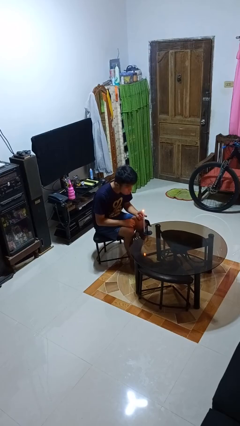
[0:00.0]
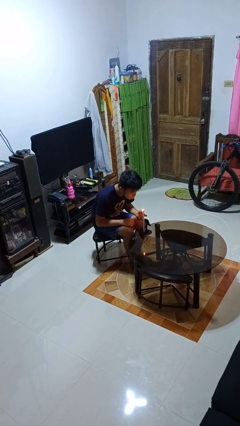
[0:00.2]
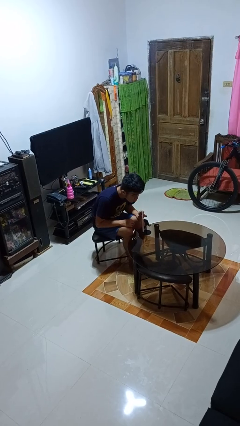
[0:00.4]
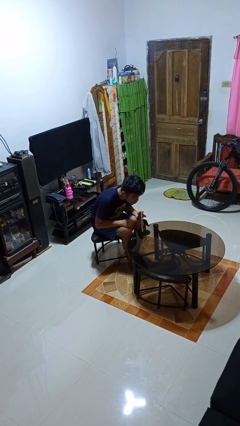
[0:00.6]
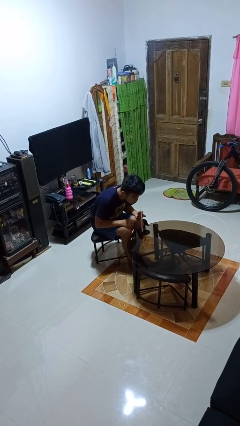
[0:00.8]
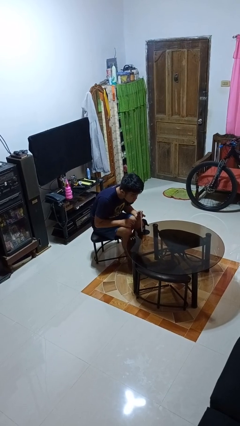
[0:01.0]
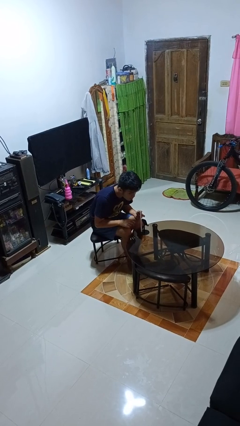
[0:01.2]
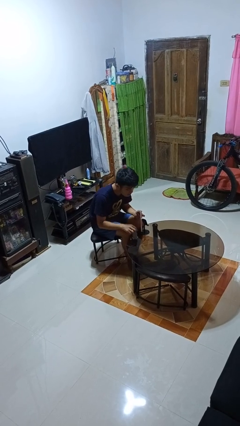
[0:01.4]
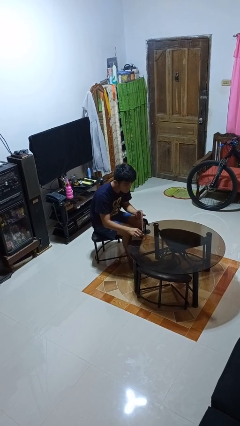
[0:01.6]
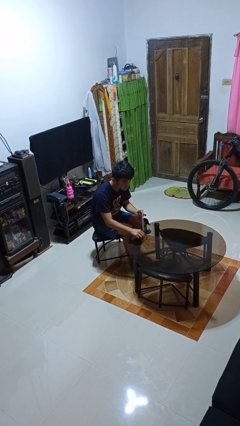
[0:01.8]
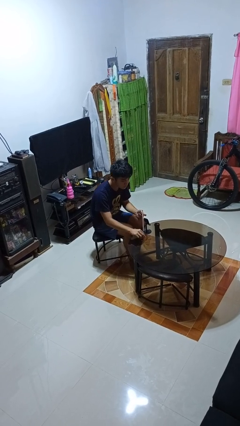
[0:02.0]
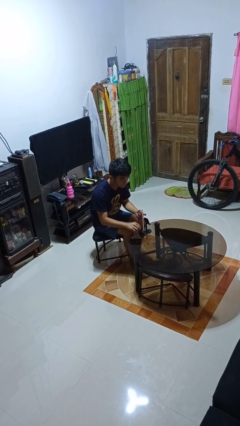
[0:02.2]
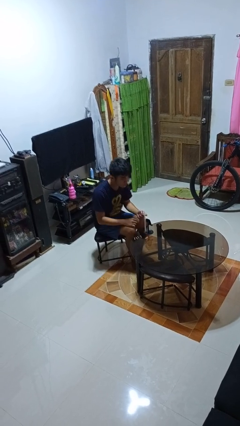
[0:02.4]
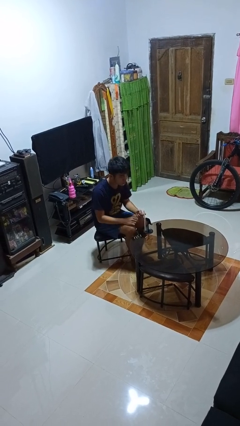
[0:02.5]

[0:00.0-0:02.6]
person extinguishes candle

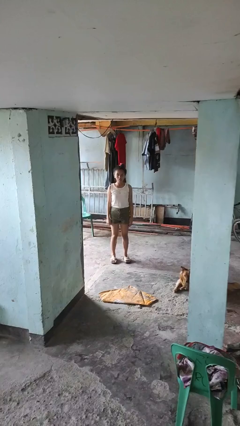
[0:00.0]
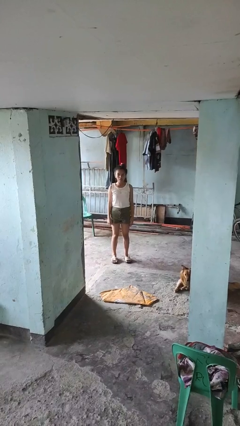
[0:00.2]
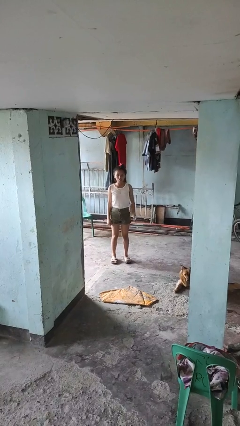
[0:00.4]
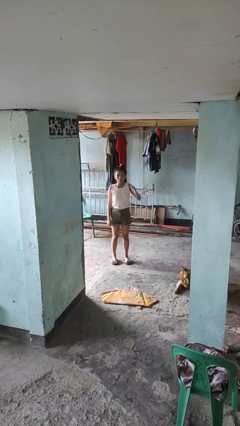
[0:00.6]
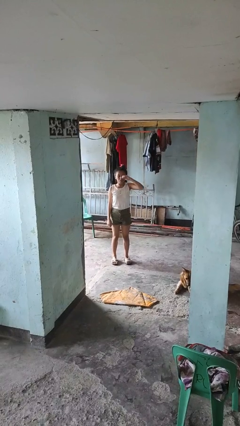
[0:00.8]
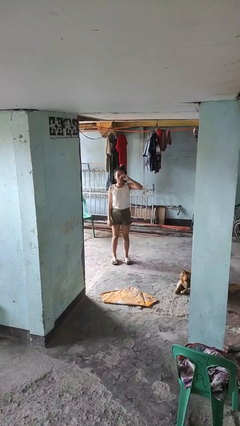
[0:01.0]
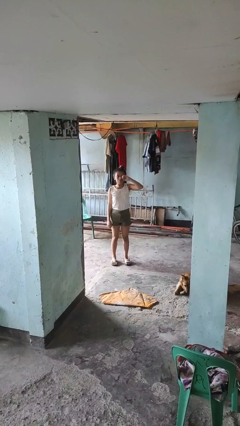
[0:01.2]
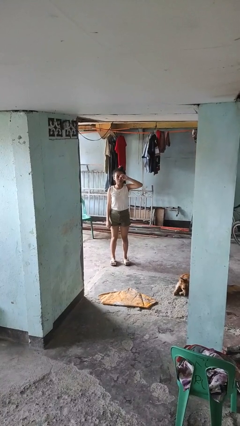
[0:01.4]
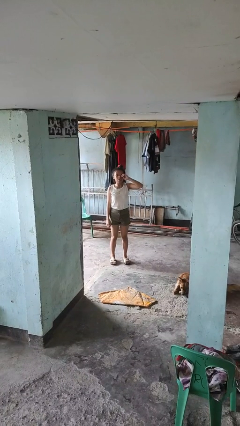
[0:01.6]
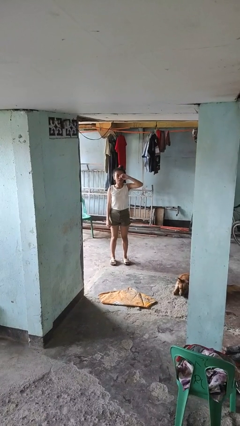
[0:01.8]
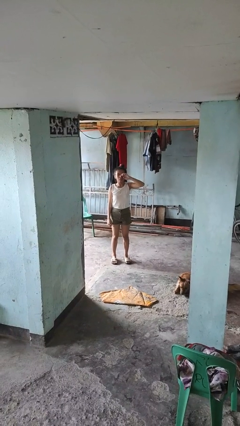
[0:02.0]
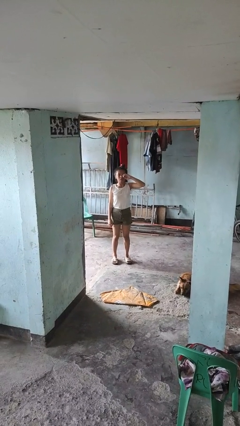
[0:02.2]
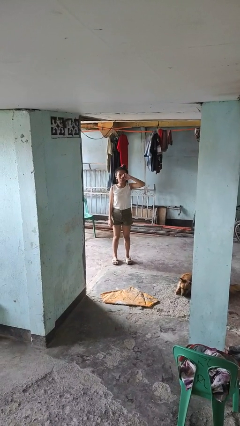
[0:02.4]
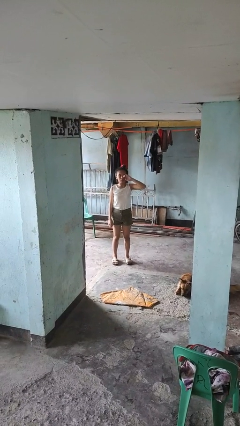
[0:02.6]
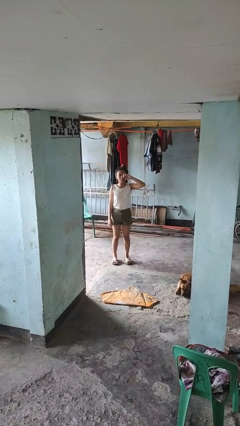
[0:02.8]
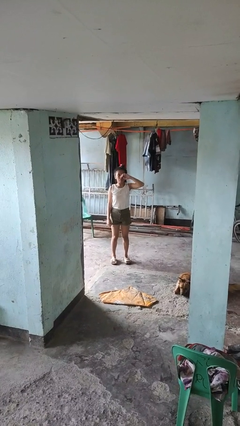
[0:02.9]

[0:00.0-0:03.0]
person rubs eyes

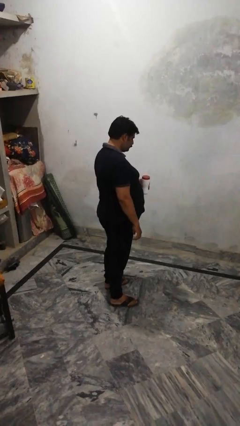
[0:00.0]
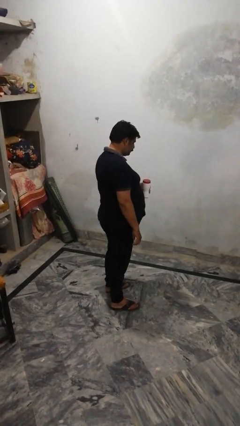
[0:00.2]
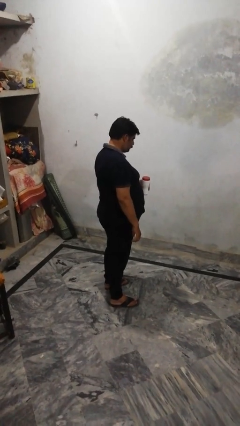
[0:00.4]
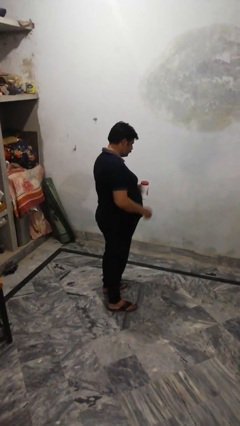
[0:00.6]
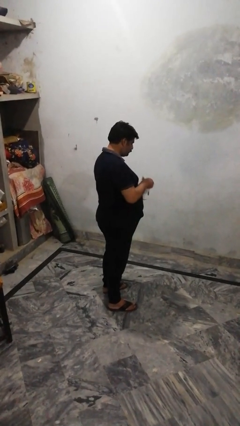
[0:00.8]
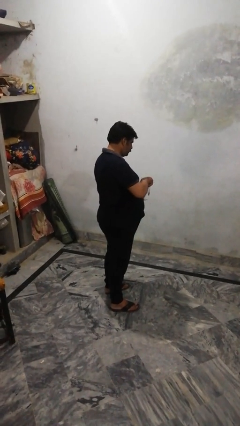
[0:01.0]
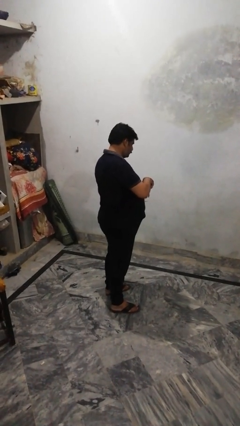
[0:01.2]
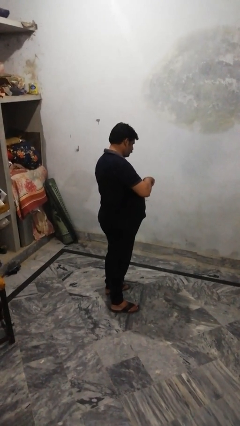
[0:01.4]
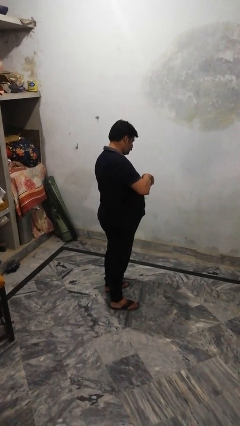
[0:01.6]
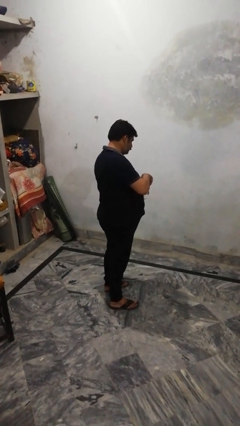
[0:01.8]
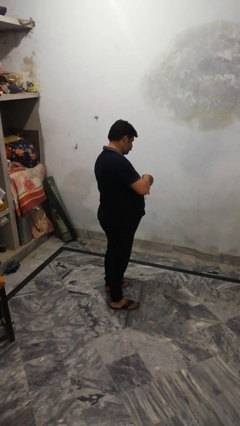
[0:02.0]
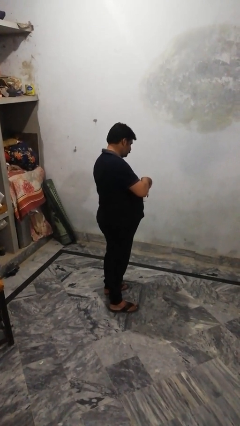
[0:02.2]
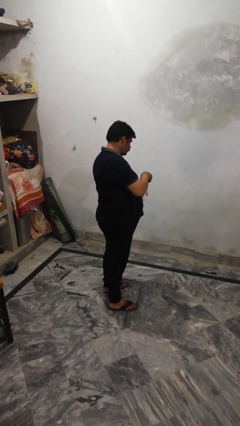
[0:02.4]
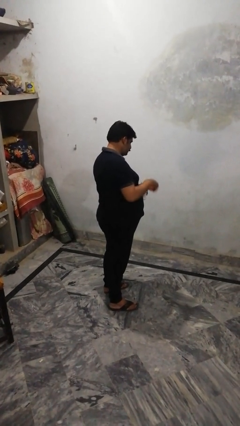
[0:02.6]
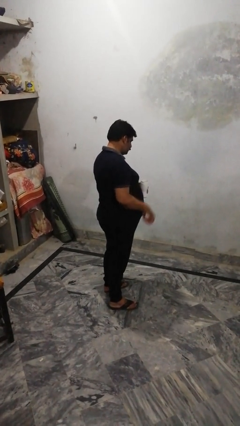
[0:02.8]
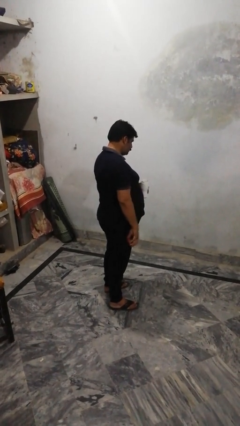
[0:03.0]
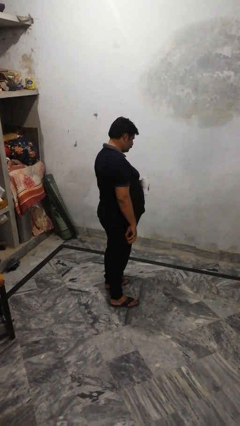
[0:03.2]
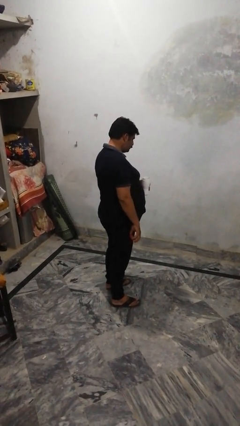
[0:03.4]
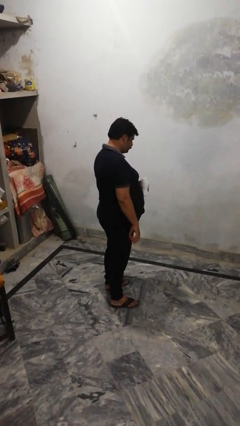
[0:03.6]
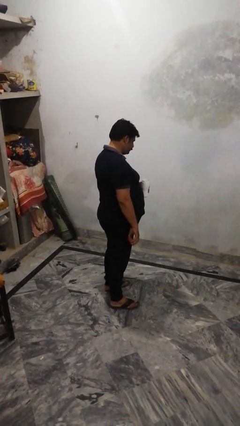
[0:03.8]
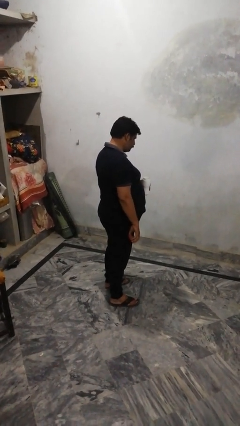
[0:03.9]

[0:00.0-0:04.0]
person opens jar

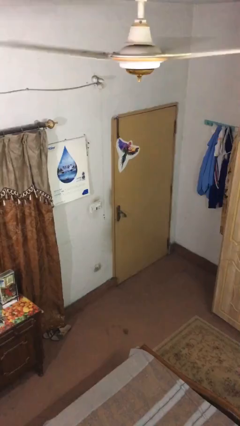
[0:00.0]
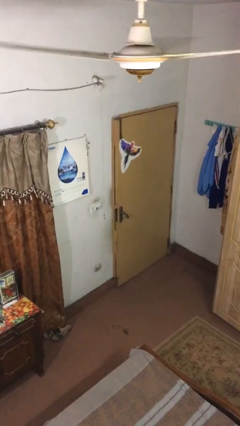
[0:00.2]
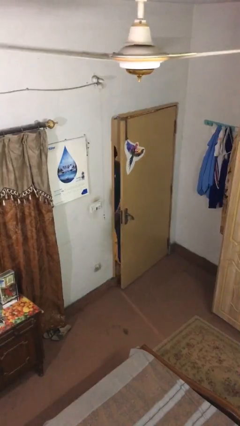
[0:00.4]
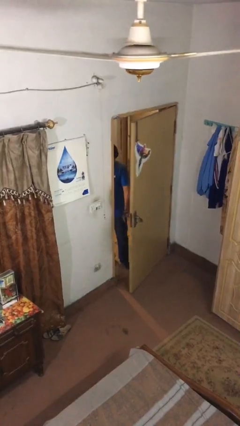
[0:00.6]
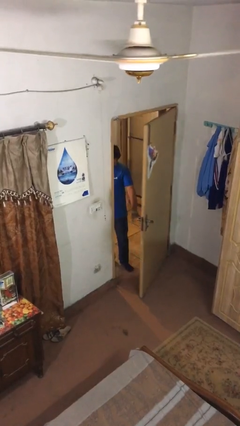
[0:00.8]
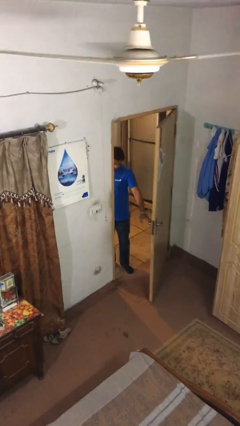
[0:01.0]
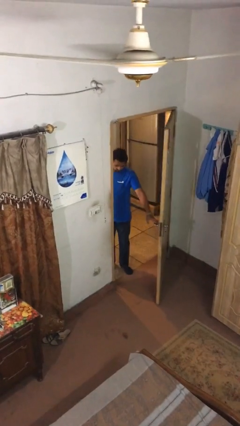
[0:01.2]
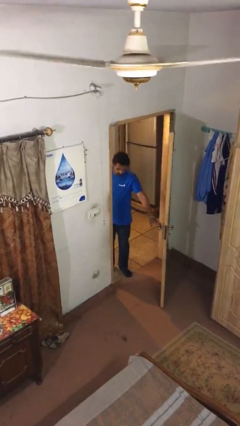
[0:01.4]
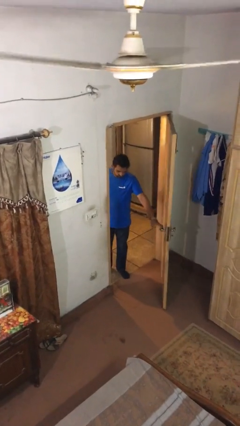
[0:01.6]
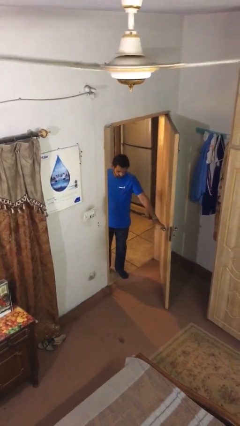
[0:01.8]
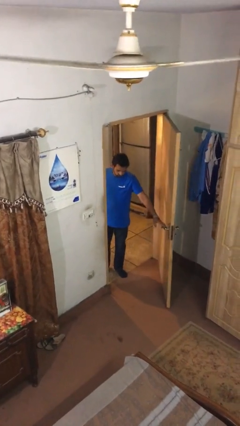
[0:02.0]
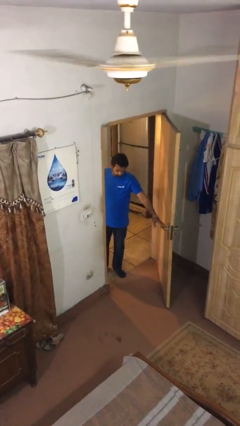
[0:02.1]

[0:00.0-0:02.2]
person opens facility door

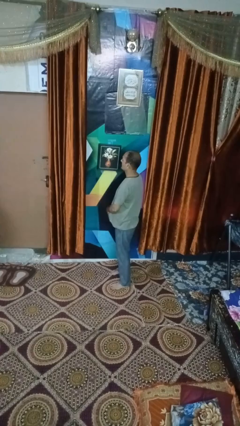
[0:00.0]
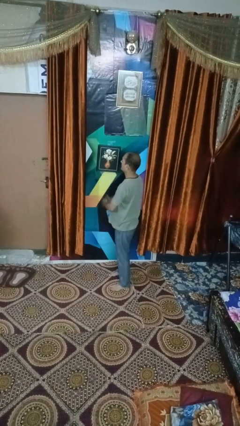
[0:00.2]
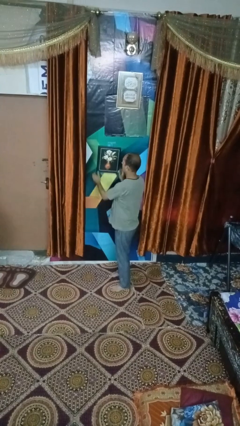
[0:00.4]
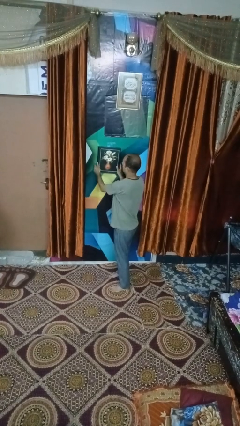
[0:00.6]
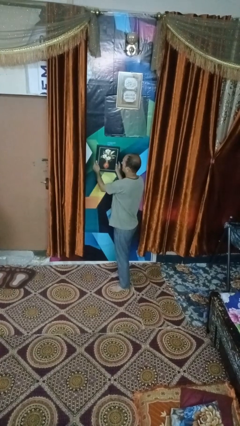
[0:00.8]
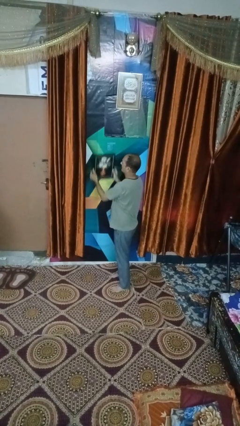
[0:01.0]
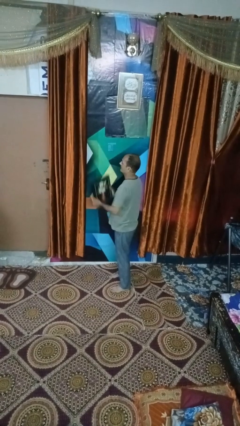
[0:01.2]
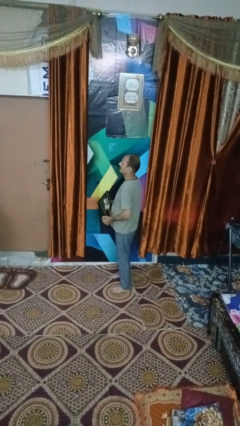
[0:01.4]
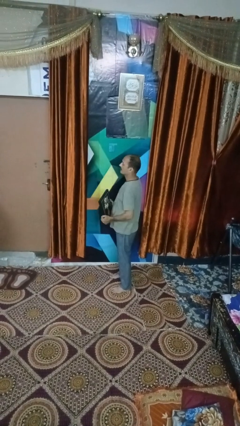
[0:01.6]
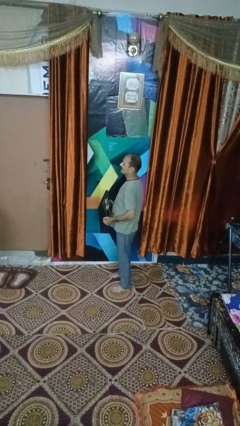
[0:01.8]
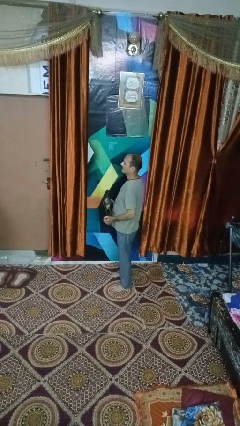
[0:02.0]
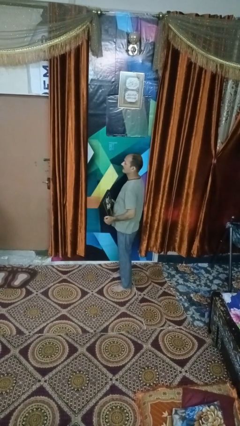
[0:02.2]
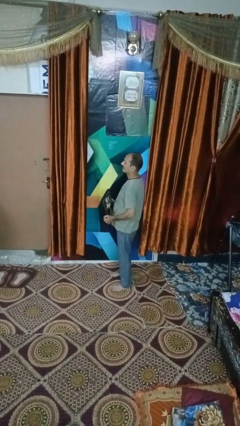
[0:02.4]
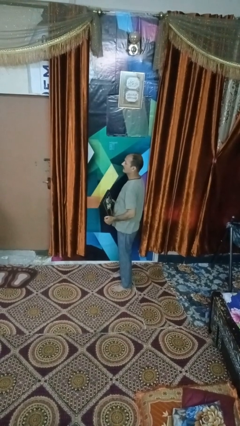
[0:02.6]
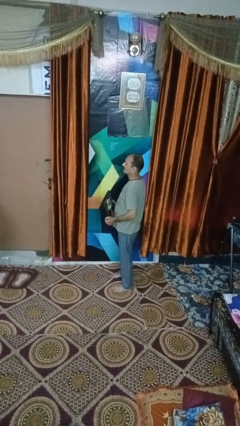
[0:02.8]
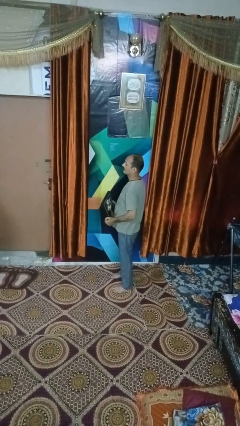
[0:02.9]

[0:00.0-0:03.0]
person takes down picture frame

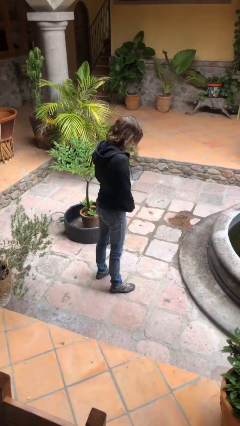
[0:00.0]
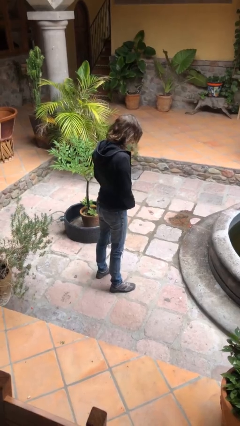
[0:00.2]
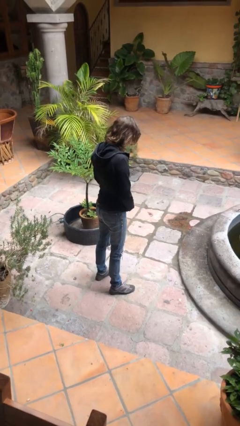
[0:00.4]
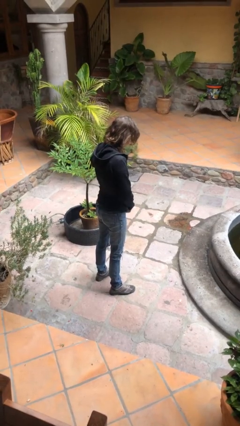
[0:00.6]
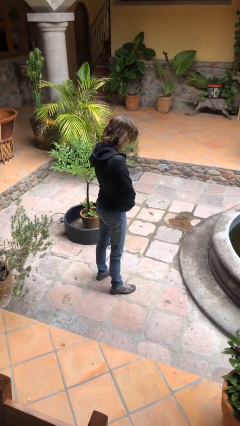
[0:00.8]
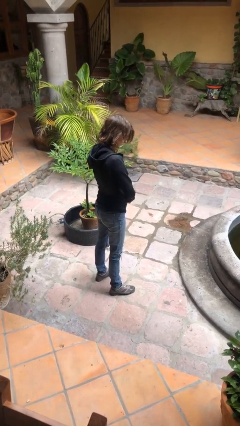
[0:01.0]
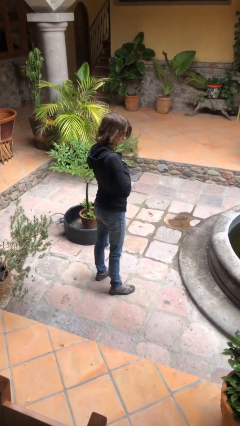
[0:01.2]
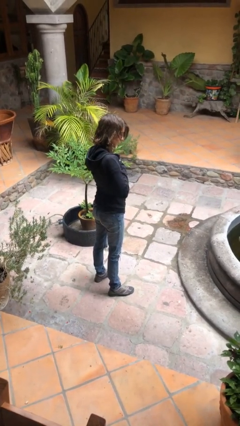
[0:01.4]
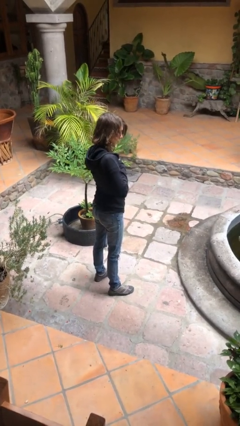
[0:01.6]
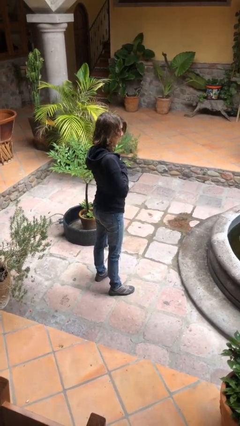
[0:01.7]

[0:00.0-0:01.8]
person zips up jacket

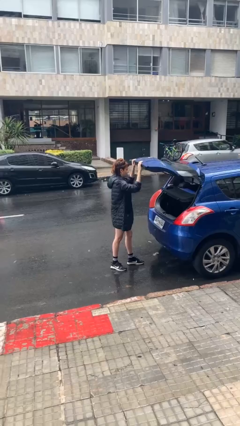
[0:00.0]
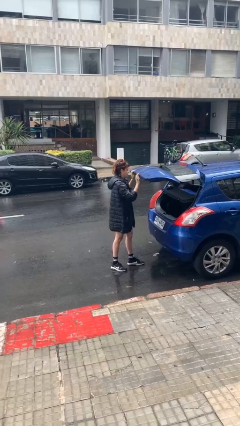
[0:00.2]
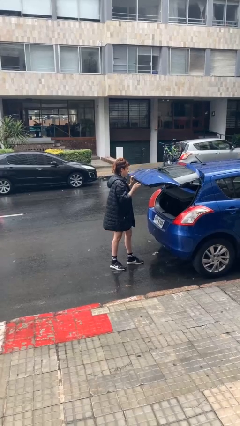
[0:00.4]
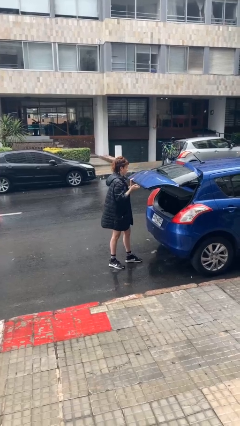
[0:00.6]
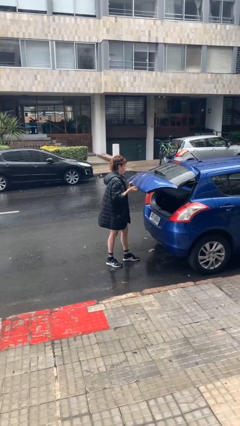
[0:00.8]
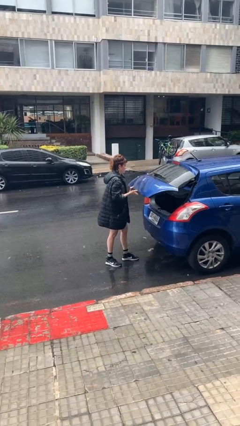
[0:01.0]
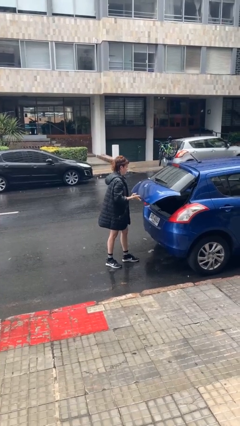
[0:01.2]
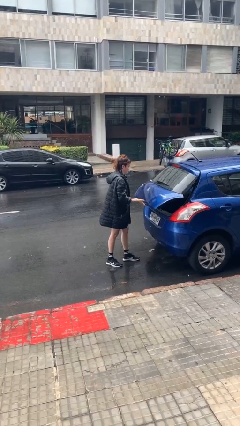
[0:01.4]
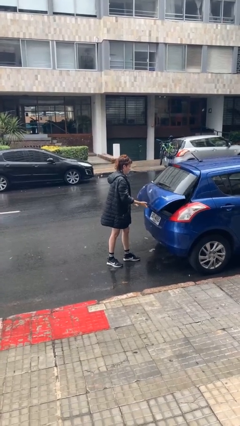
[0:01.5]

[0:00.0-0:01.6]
person closes car trunk
